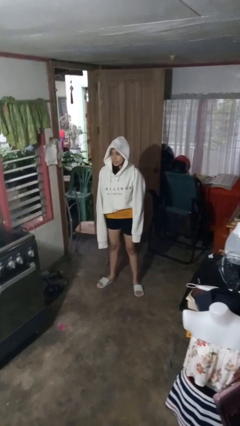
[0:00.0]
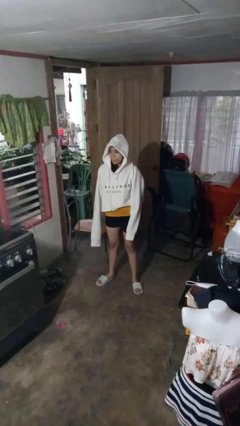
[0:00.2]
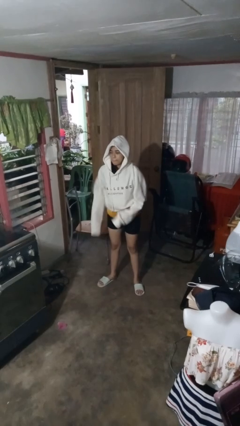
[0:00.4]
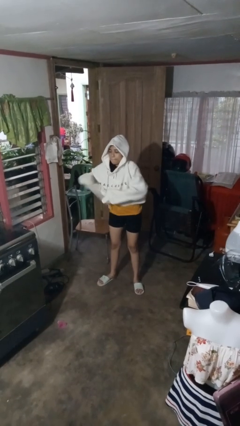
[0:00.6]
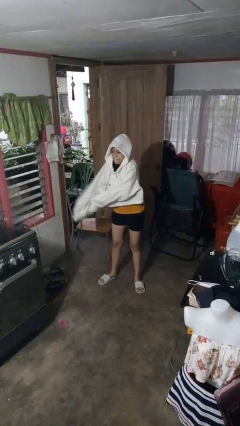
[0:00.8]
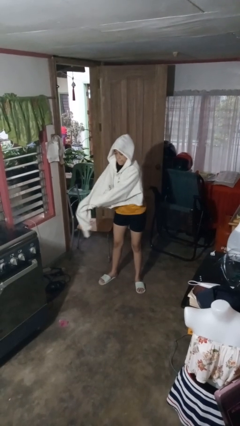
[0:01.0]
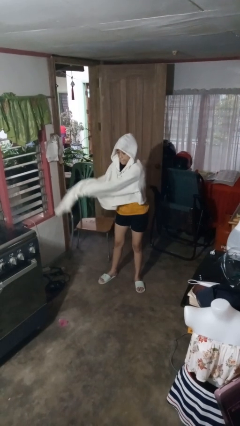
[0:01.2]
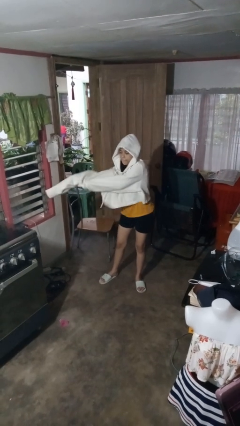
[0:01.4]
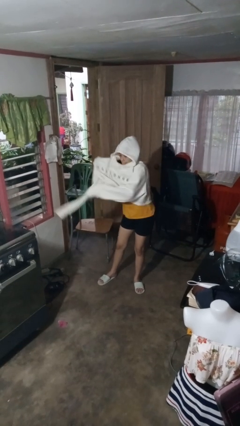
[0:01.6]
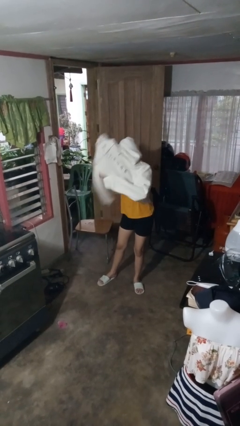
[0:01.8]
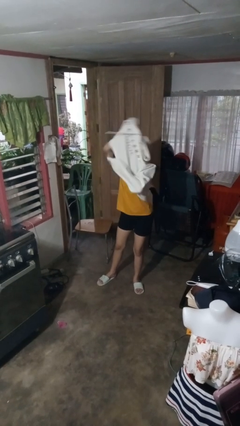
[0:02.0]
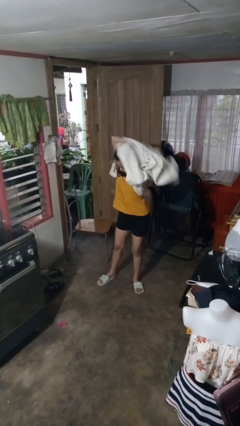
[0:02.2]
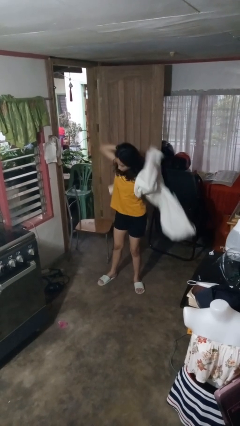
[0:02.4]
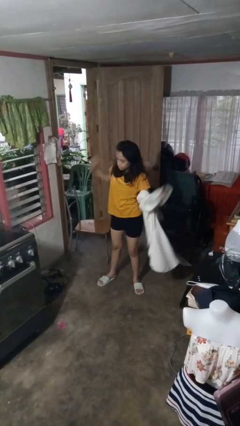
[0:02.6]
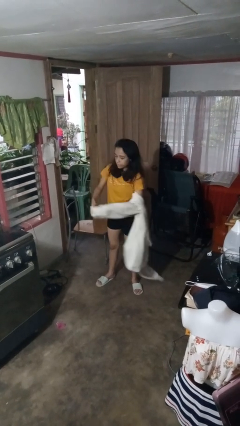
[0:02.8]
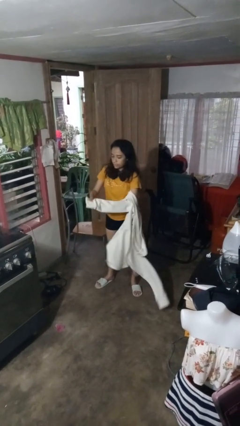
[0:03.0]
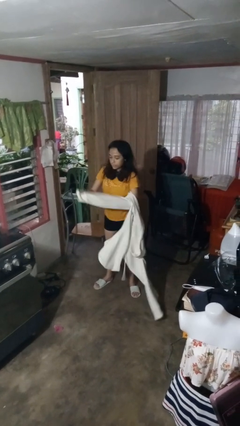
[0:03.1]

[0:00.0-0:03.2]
person takes off hoodie

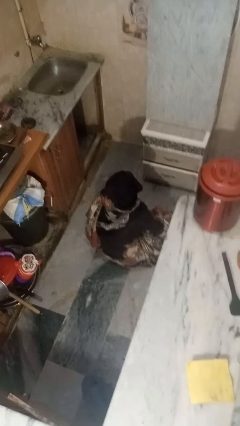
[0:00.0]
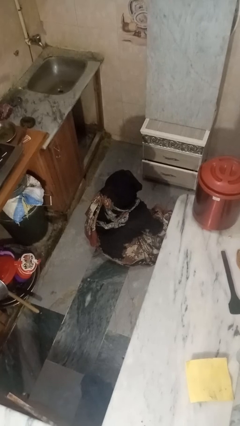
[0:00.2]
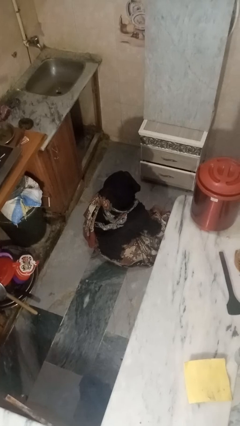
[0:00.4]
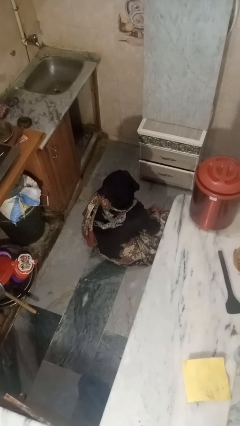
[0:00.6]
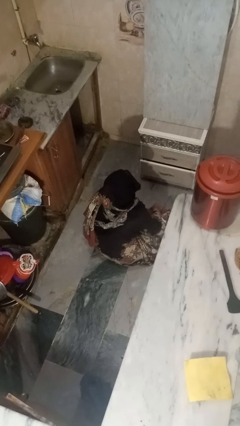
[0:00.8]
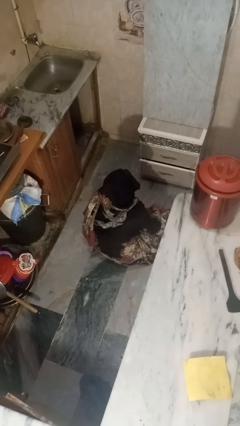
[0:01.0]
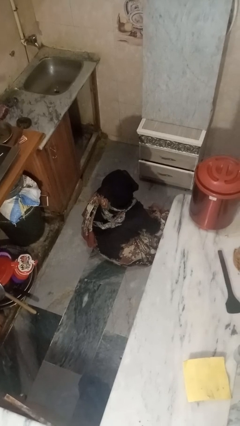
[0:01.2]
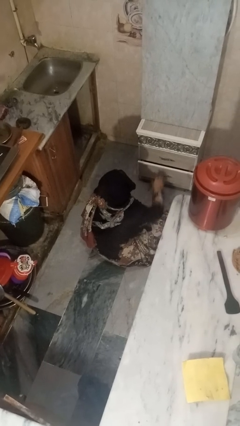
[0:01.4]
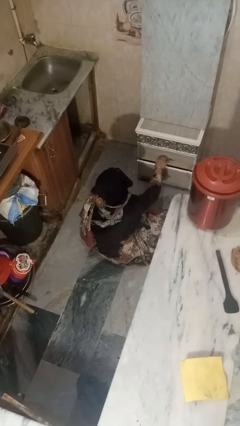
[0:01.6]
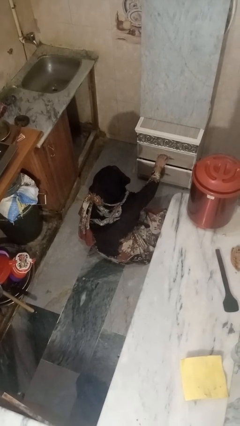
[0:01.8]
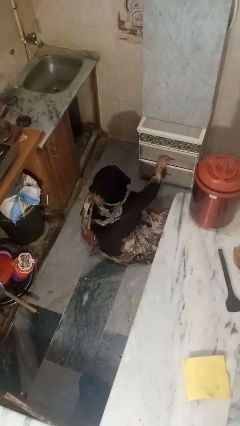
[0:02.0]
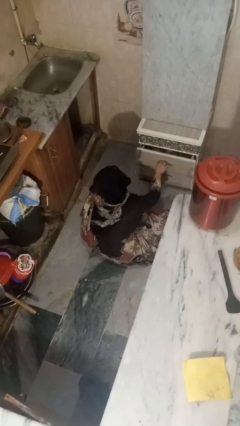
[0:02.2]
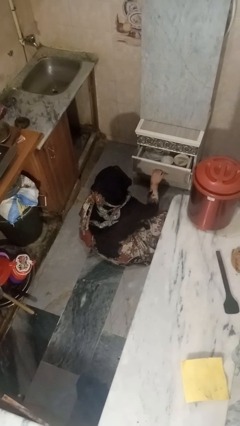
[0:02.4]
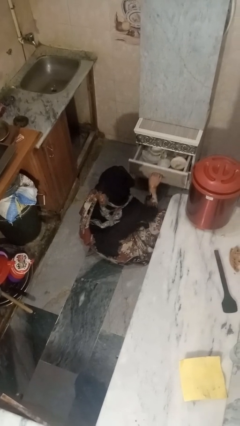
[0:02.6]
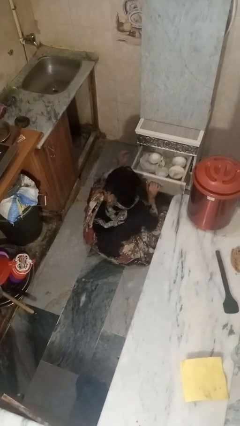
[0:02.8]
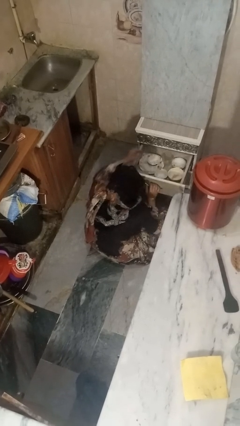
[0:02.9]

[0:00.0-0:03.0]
person takes object from kitchen drawer

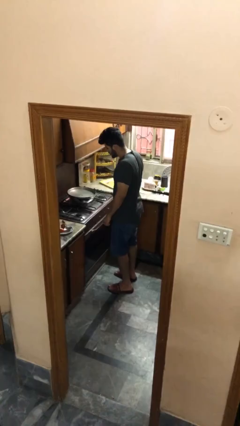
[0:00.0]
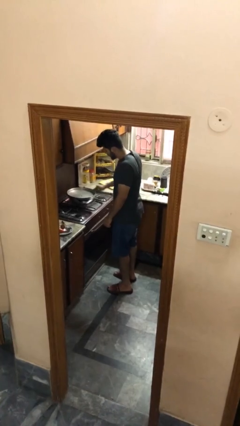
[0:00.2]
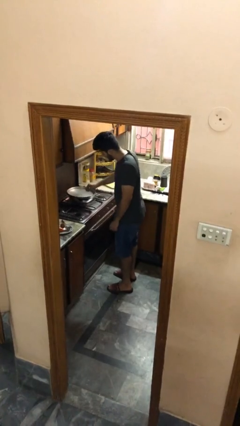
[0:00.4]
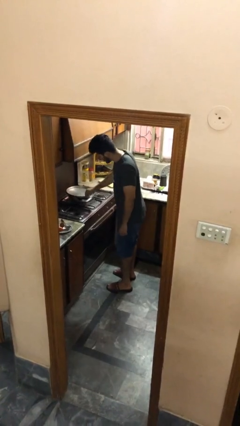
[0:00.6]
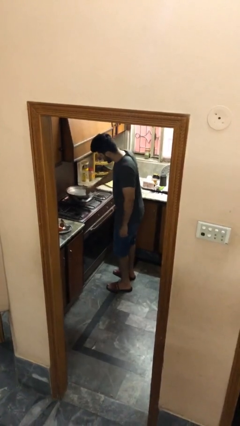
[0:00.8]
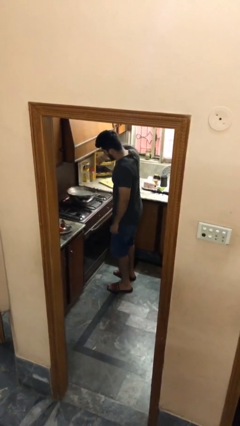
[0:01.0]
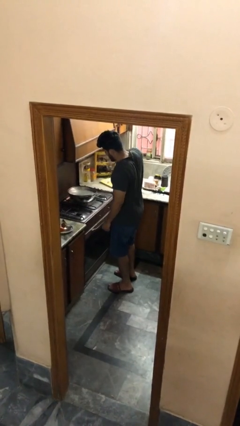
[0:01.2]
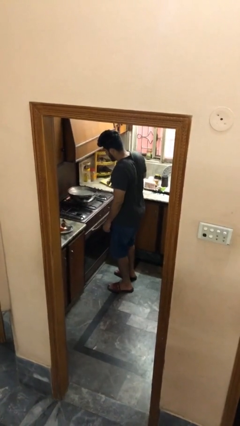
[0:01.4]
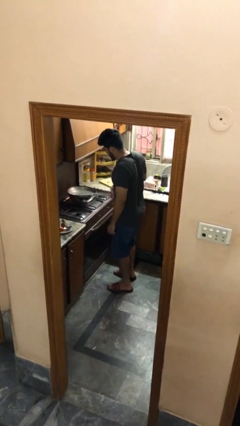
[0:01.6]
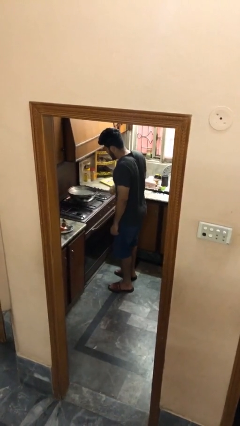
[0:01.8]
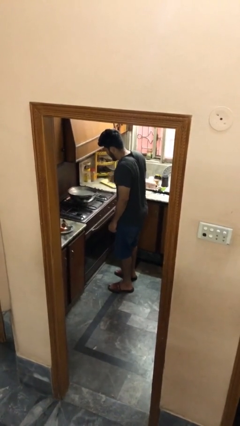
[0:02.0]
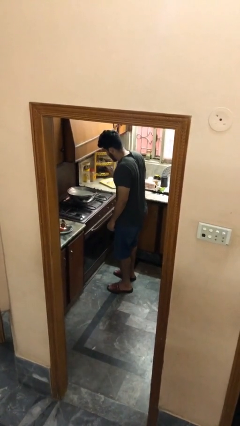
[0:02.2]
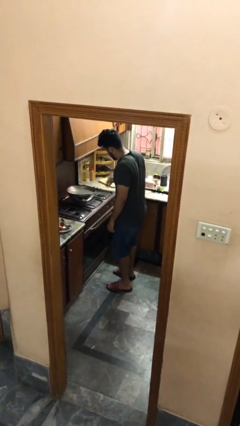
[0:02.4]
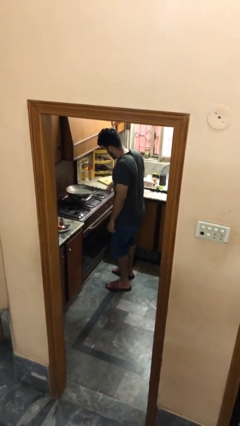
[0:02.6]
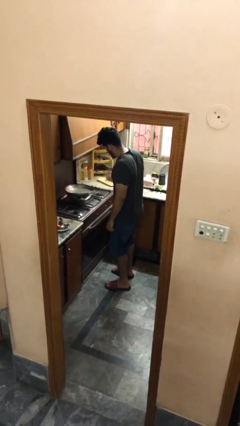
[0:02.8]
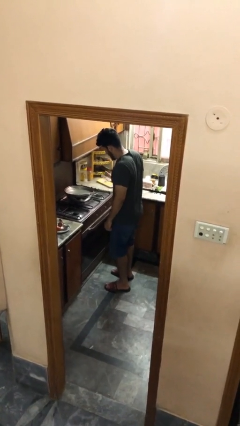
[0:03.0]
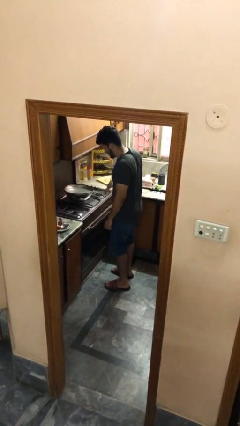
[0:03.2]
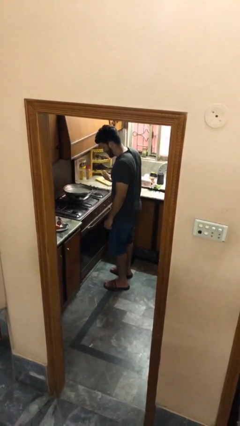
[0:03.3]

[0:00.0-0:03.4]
person burns hand

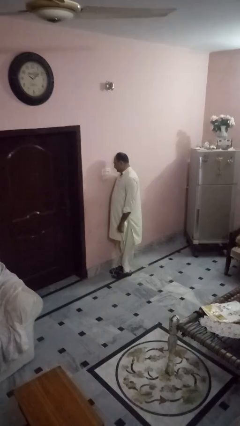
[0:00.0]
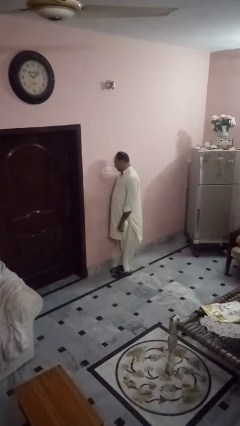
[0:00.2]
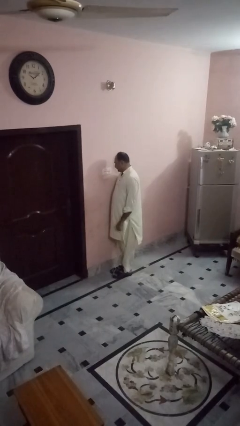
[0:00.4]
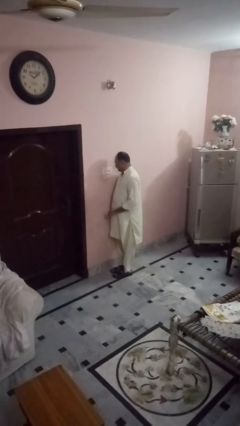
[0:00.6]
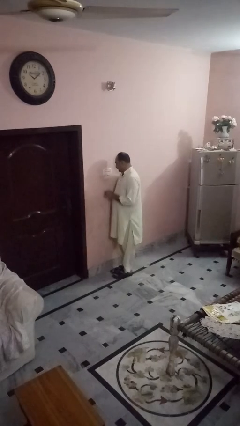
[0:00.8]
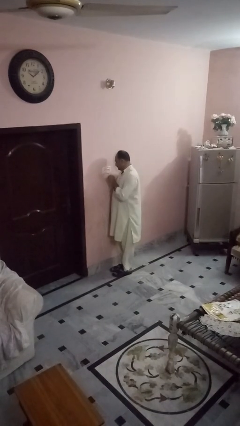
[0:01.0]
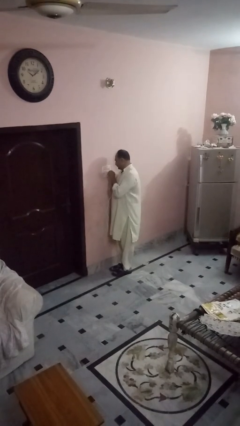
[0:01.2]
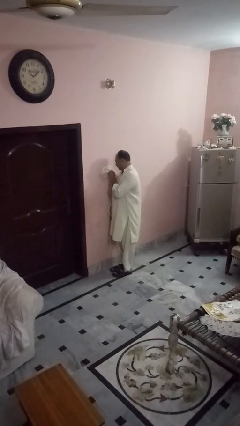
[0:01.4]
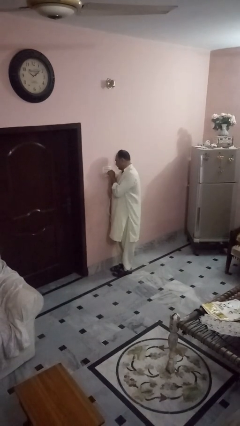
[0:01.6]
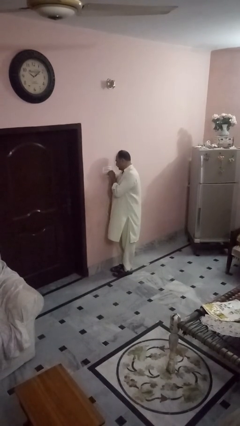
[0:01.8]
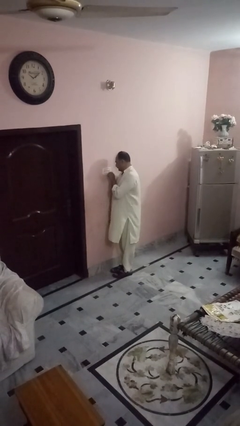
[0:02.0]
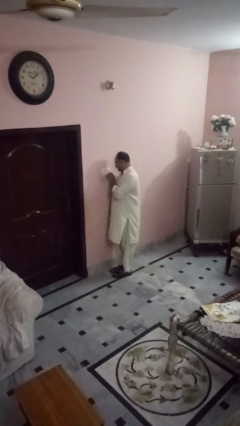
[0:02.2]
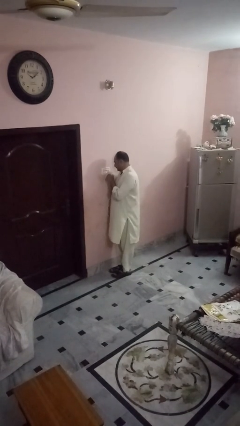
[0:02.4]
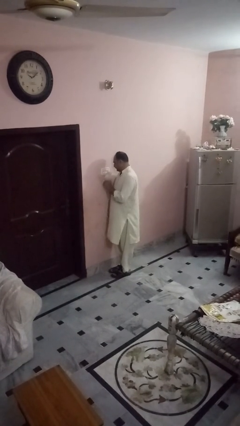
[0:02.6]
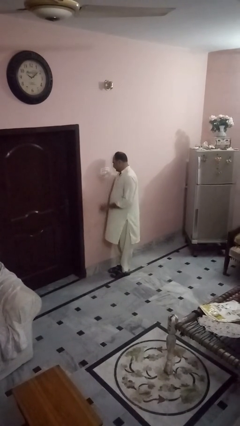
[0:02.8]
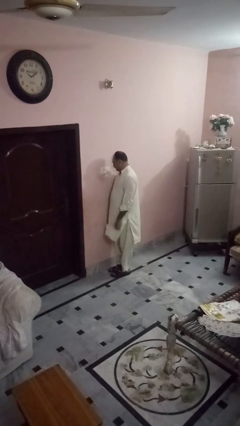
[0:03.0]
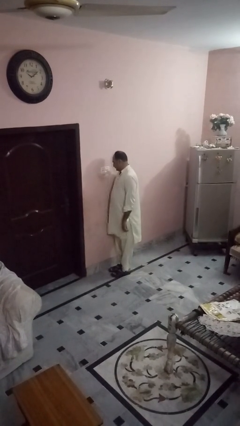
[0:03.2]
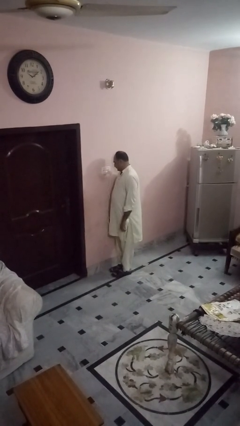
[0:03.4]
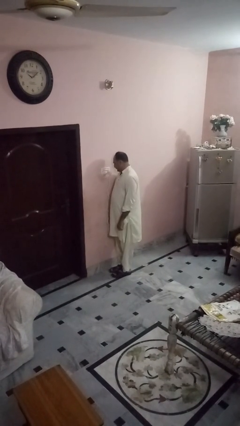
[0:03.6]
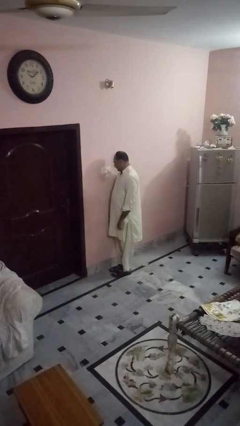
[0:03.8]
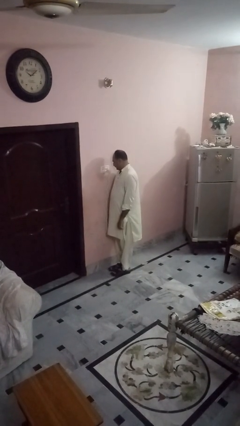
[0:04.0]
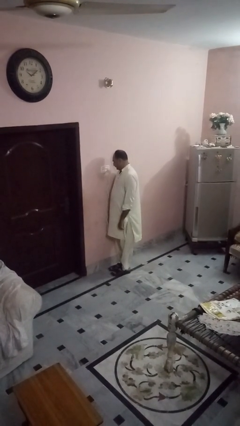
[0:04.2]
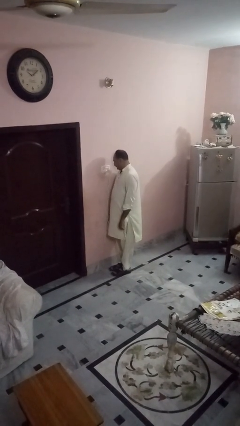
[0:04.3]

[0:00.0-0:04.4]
person plugs into electrical socket

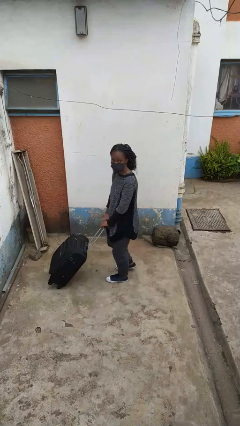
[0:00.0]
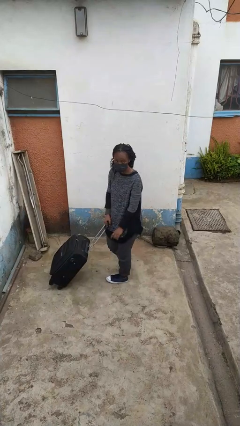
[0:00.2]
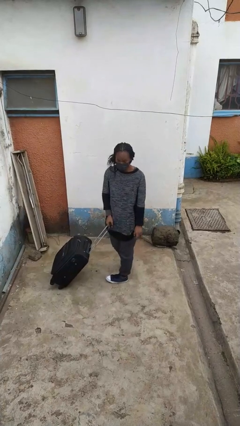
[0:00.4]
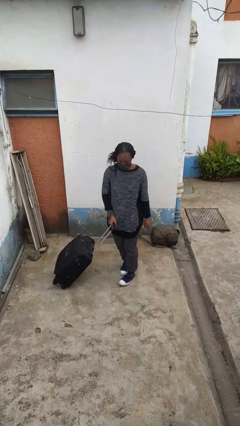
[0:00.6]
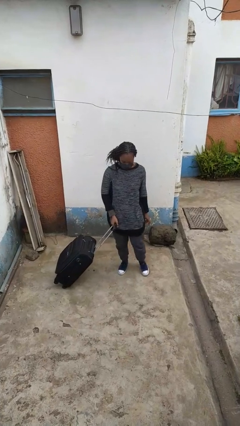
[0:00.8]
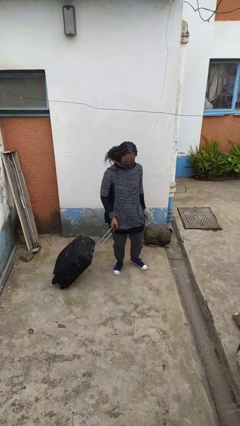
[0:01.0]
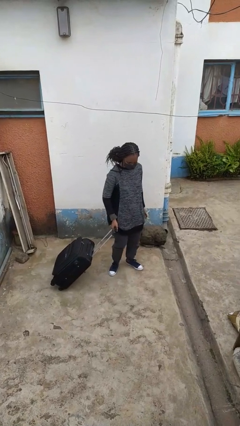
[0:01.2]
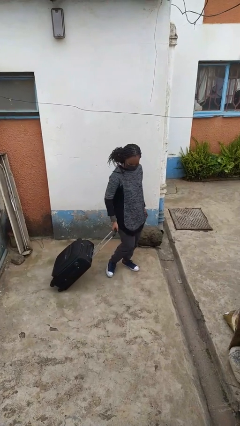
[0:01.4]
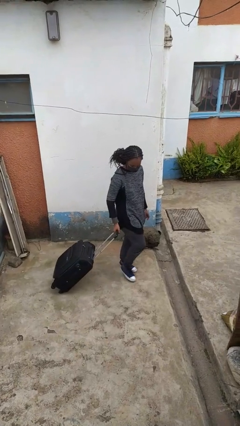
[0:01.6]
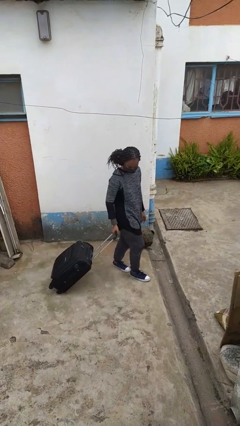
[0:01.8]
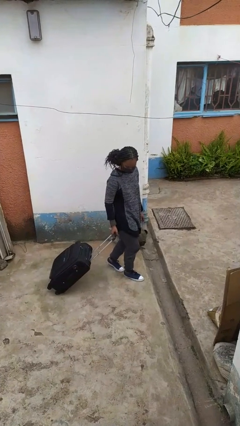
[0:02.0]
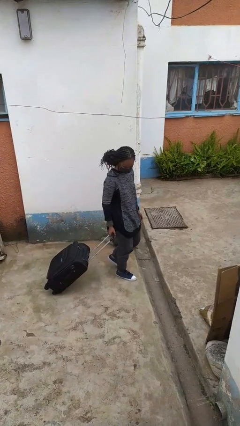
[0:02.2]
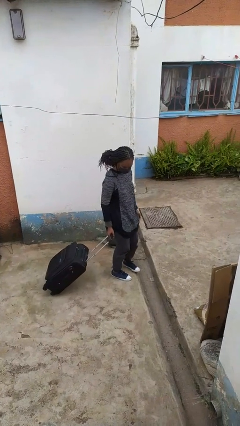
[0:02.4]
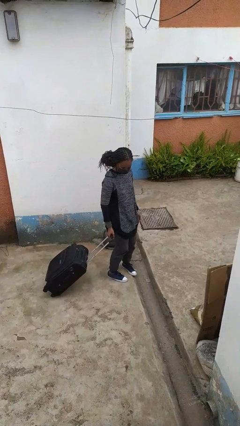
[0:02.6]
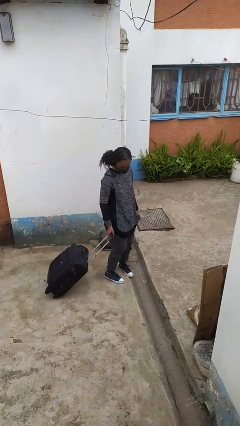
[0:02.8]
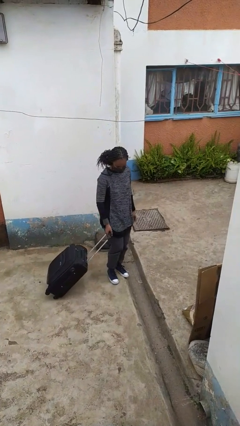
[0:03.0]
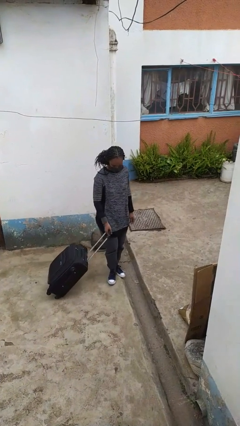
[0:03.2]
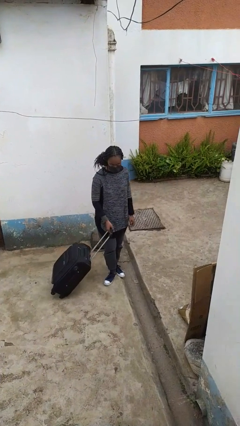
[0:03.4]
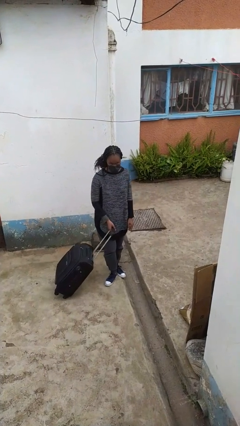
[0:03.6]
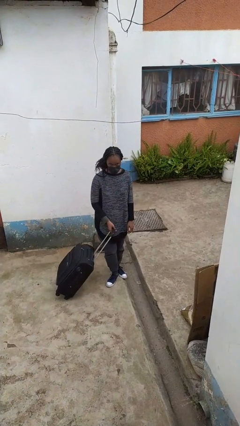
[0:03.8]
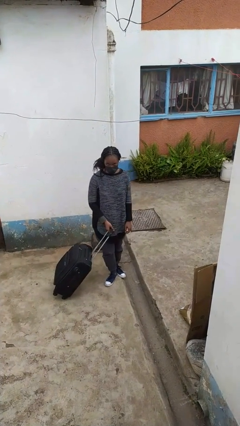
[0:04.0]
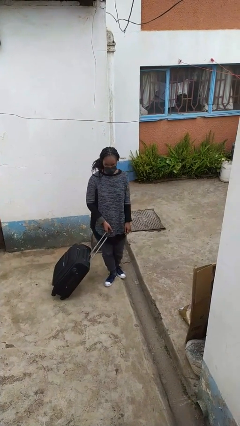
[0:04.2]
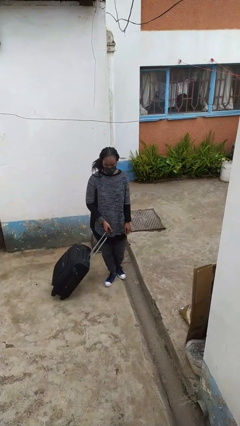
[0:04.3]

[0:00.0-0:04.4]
person pulls wheeled cart
